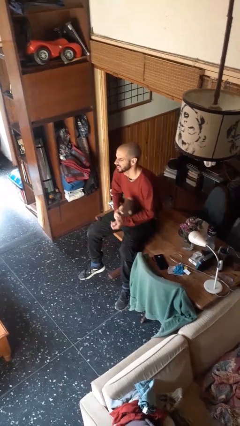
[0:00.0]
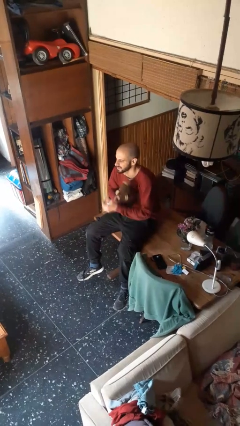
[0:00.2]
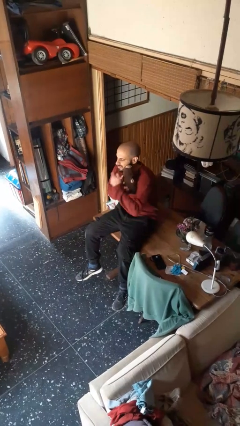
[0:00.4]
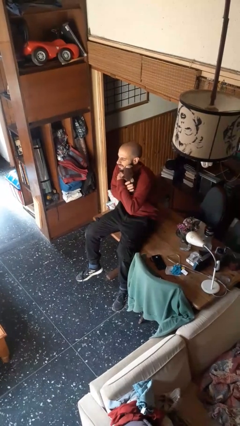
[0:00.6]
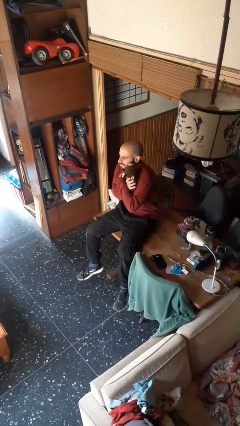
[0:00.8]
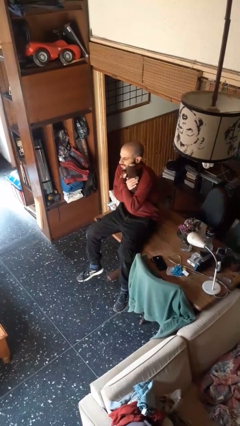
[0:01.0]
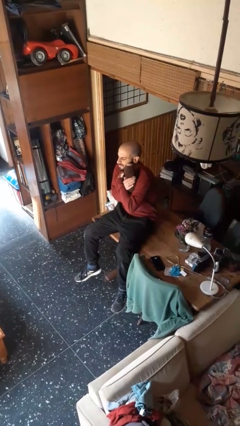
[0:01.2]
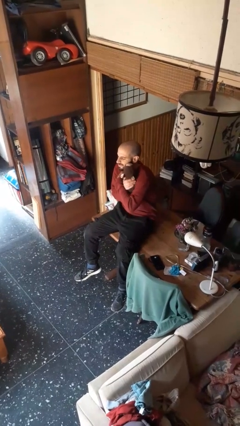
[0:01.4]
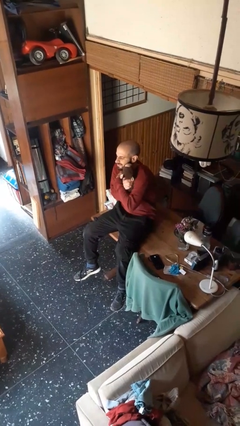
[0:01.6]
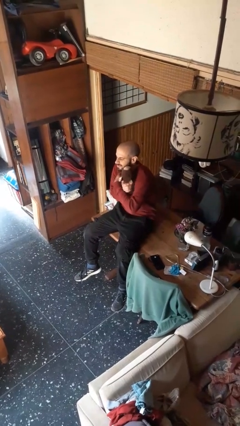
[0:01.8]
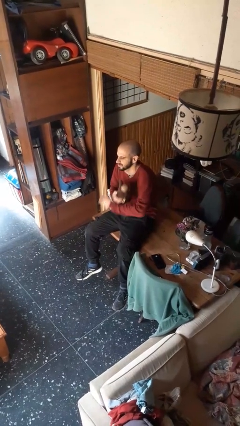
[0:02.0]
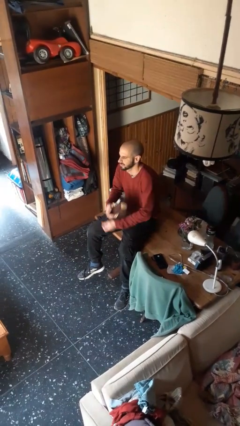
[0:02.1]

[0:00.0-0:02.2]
person hugs stuffed animal

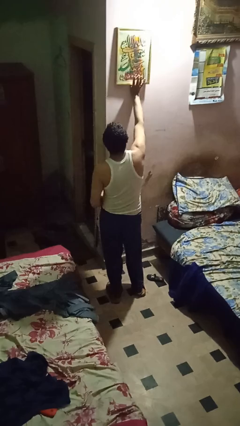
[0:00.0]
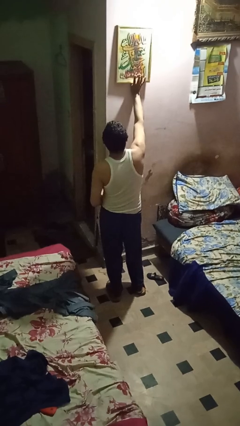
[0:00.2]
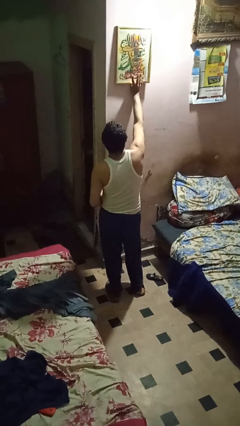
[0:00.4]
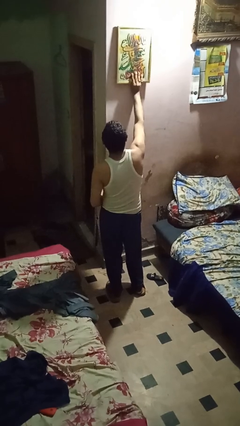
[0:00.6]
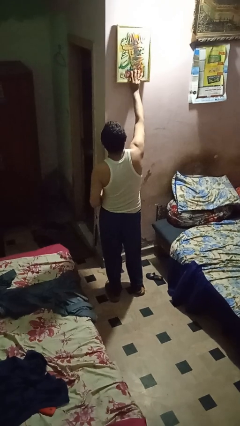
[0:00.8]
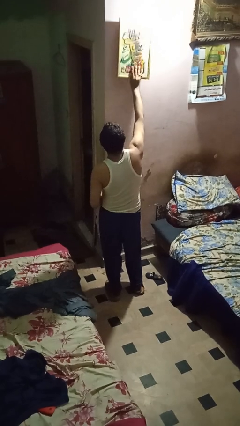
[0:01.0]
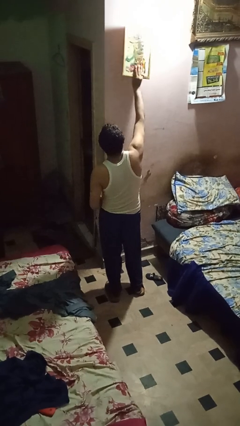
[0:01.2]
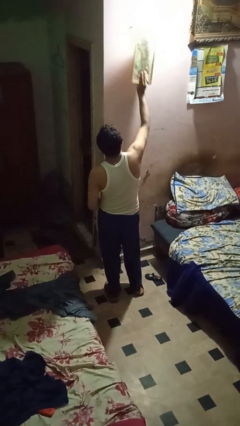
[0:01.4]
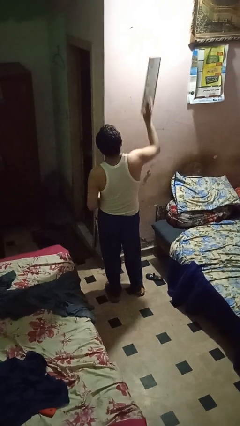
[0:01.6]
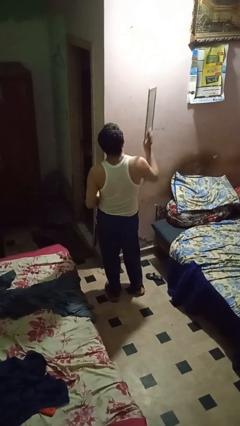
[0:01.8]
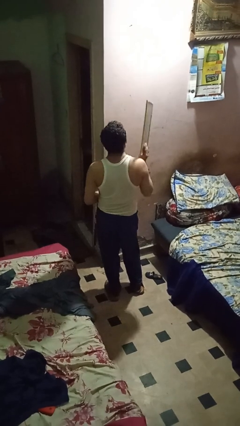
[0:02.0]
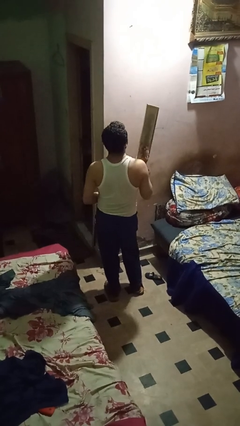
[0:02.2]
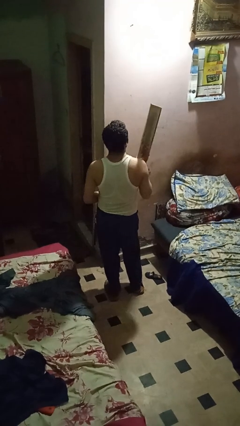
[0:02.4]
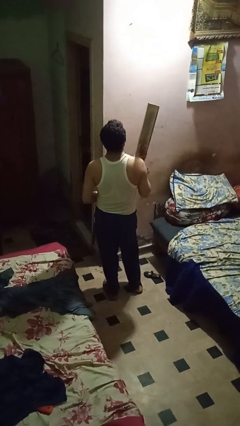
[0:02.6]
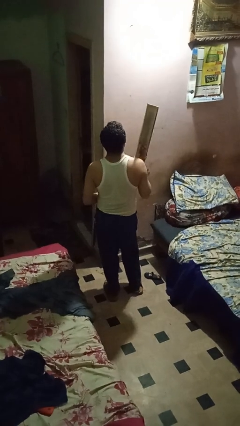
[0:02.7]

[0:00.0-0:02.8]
person takes down picture frame

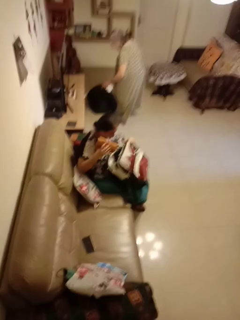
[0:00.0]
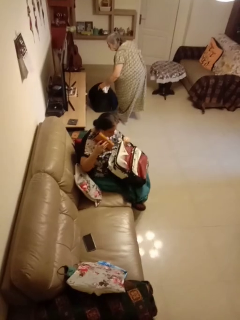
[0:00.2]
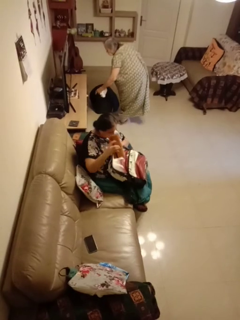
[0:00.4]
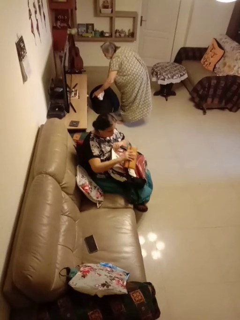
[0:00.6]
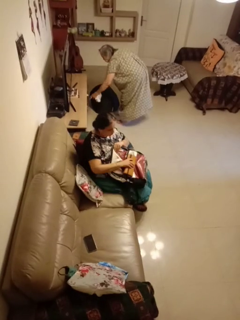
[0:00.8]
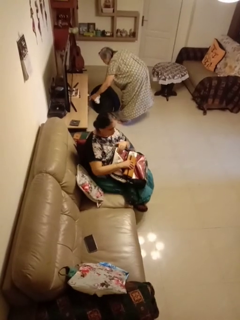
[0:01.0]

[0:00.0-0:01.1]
person takes object from backpack

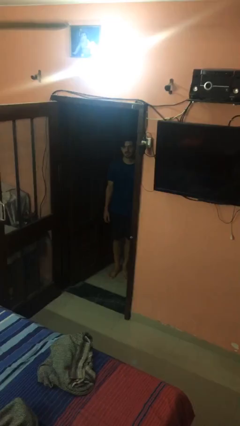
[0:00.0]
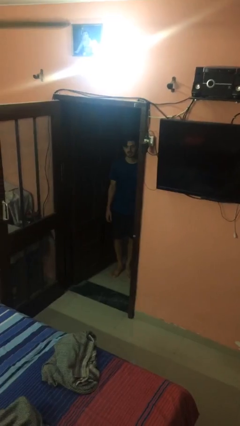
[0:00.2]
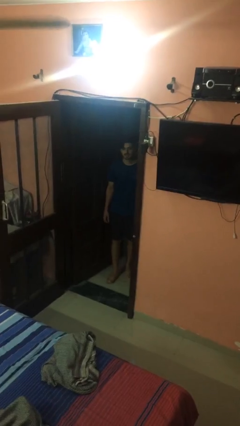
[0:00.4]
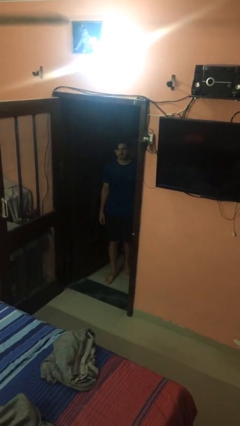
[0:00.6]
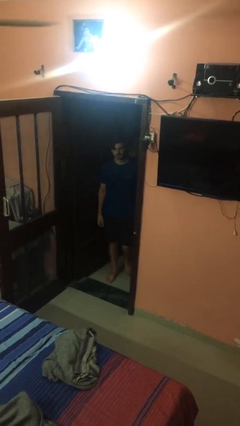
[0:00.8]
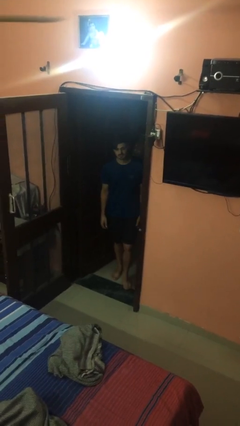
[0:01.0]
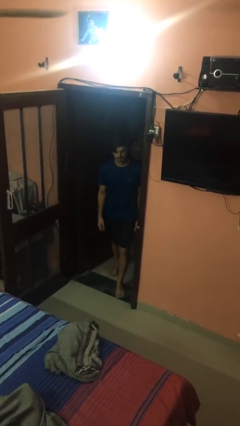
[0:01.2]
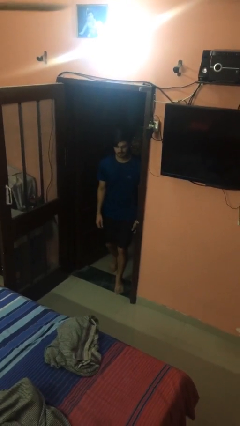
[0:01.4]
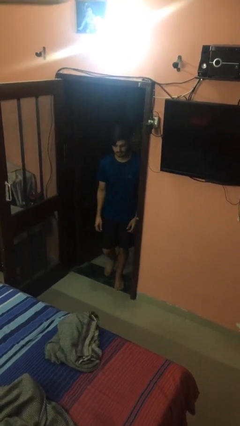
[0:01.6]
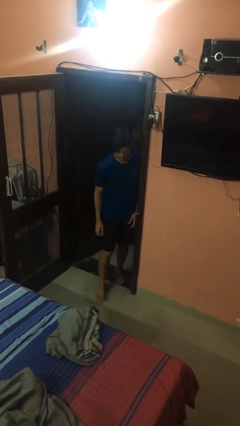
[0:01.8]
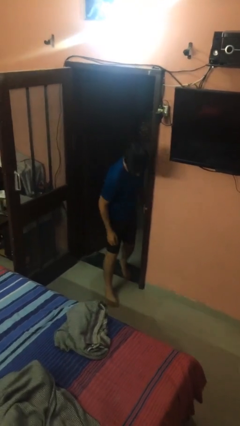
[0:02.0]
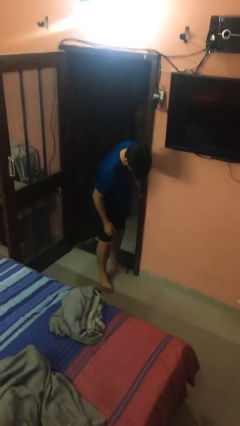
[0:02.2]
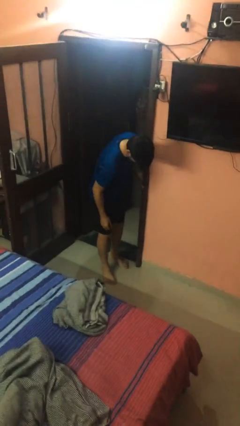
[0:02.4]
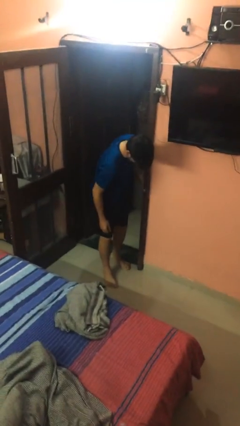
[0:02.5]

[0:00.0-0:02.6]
person bumps into wall

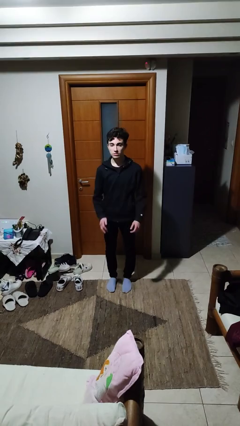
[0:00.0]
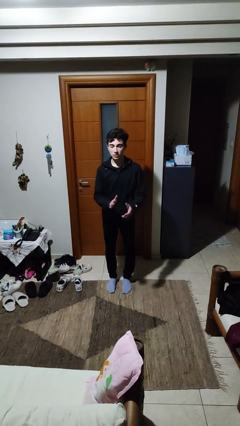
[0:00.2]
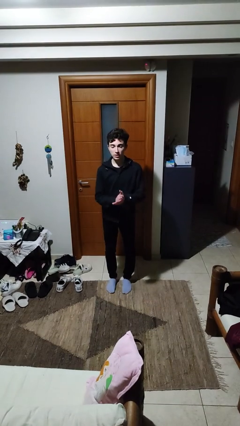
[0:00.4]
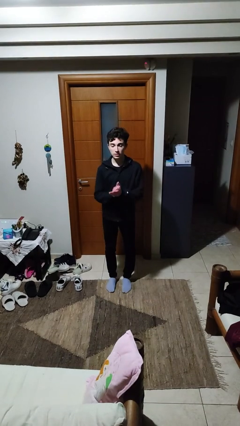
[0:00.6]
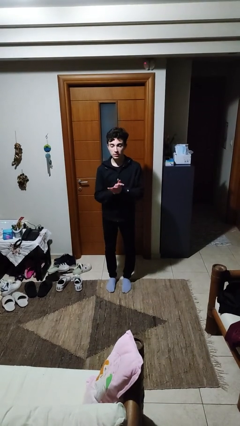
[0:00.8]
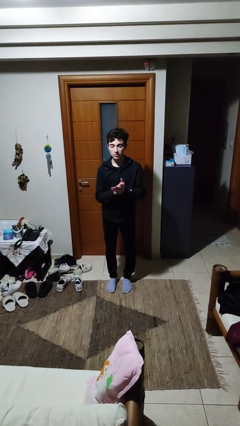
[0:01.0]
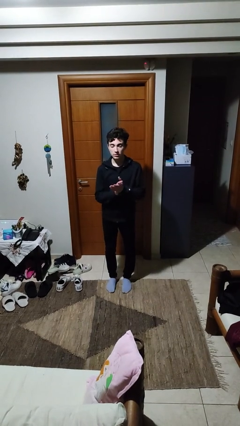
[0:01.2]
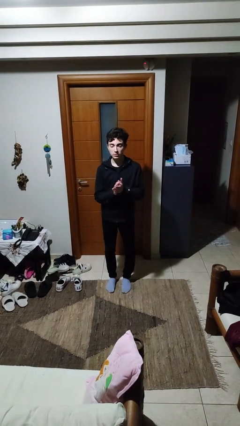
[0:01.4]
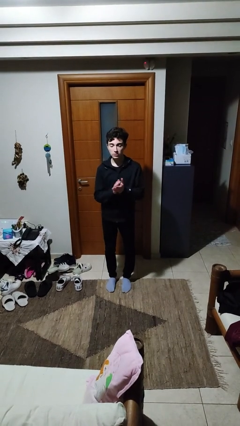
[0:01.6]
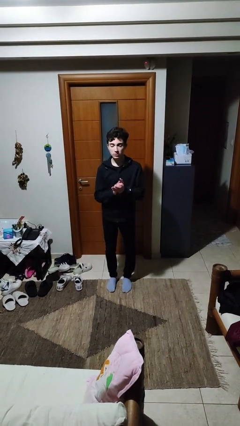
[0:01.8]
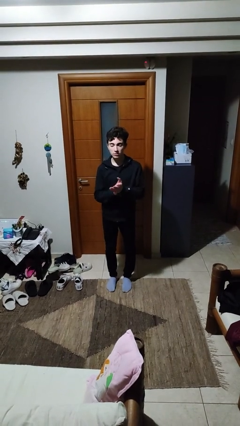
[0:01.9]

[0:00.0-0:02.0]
person claps hands

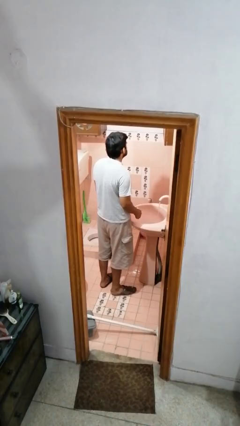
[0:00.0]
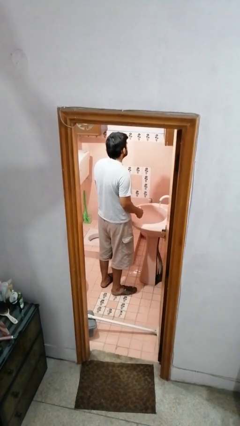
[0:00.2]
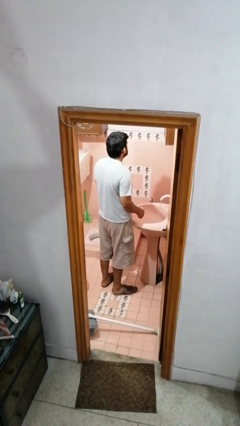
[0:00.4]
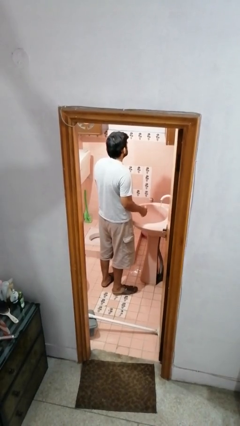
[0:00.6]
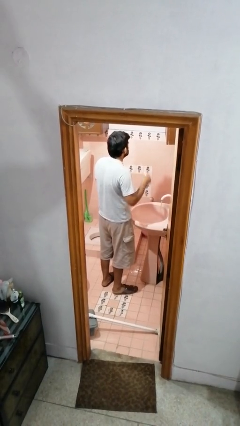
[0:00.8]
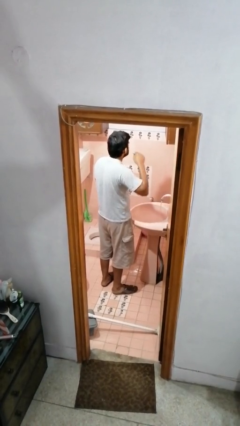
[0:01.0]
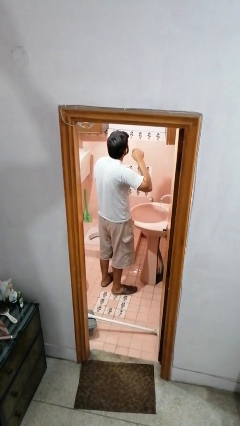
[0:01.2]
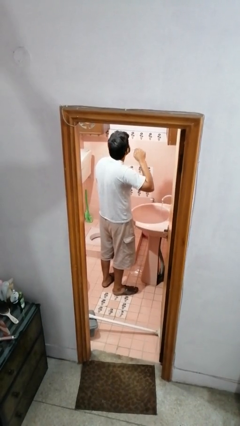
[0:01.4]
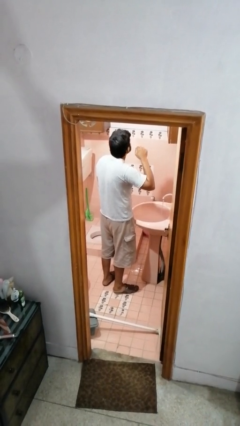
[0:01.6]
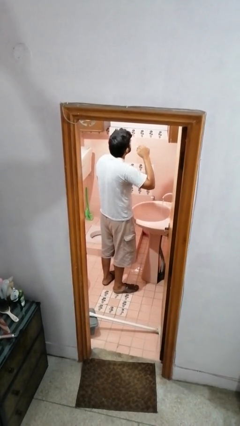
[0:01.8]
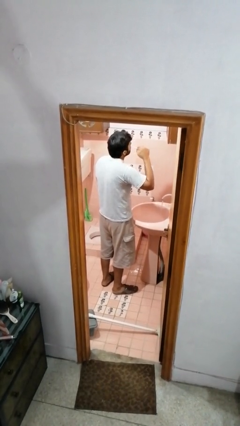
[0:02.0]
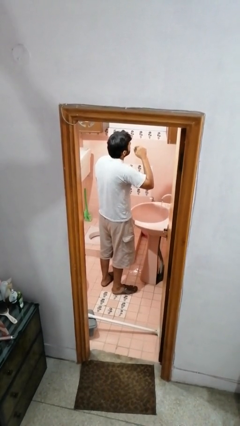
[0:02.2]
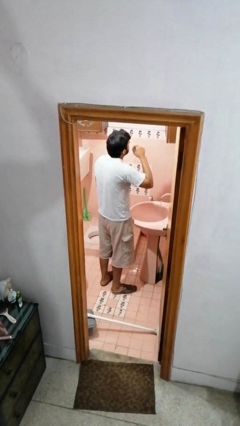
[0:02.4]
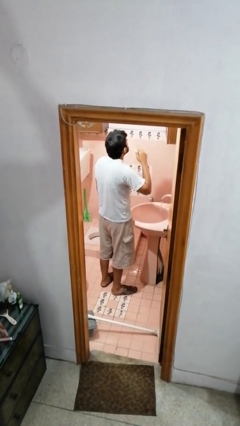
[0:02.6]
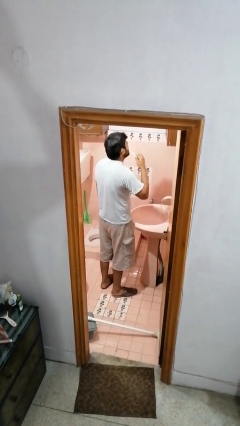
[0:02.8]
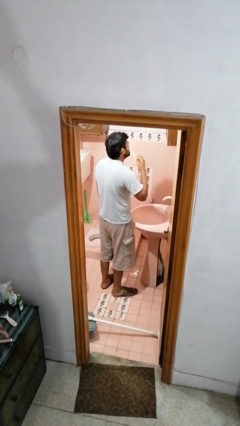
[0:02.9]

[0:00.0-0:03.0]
person brushes teeth

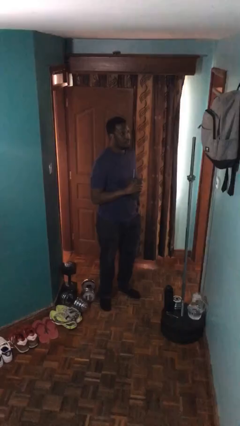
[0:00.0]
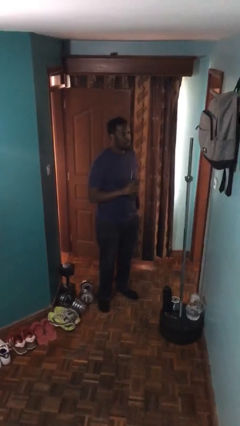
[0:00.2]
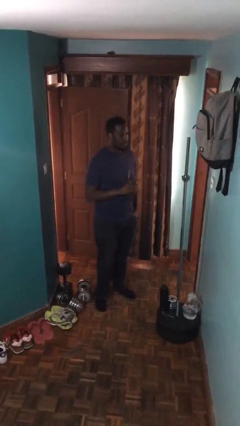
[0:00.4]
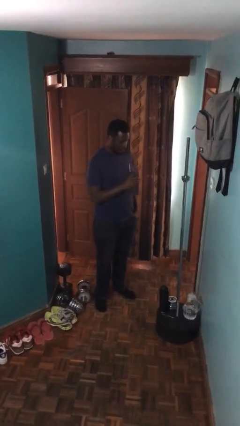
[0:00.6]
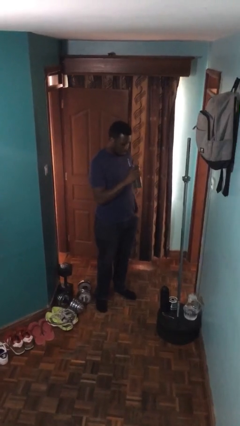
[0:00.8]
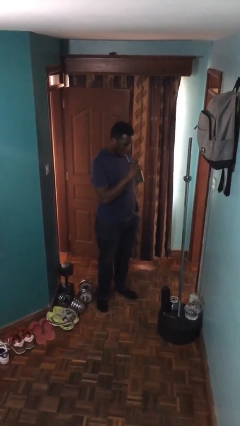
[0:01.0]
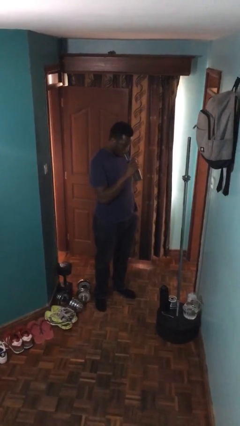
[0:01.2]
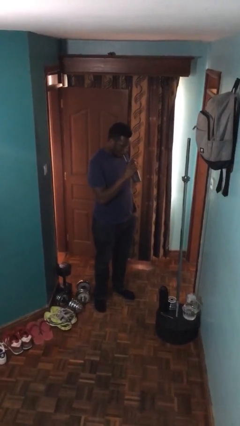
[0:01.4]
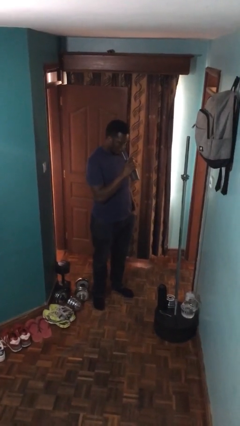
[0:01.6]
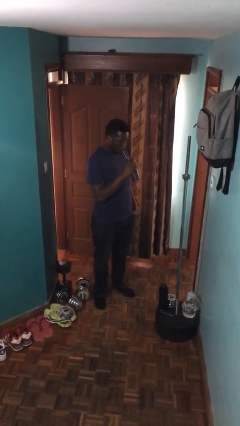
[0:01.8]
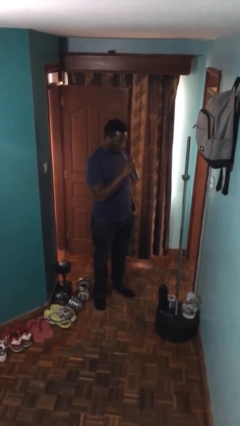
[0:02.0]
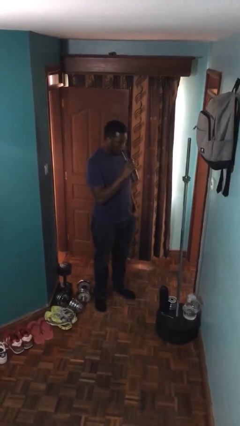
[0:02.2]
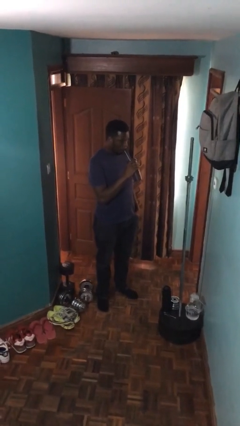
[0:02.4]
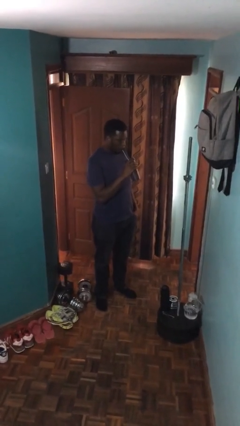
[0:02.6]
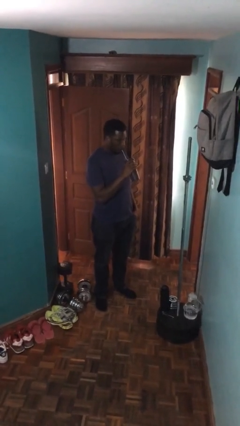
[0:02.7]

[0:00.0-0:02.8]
person drinks from straw

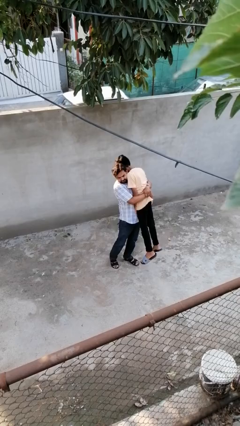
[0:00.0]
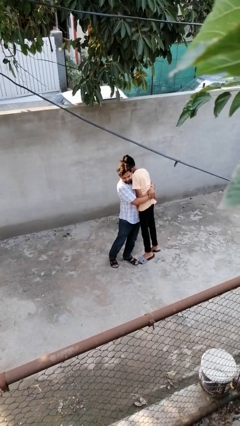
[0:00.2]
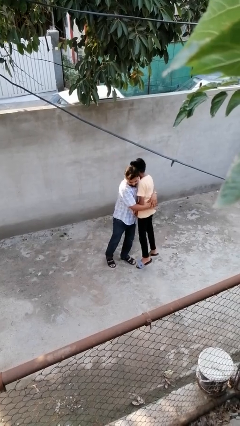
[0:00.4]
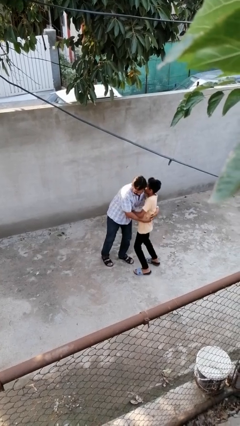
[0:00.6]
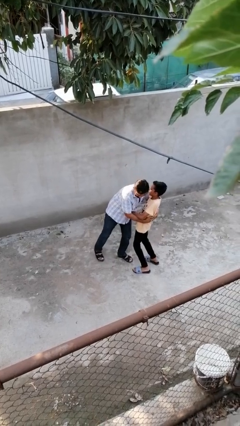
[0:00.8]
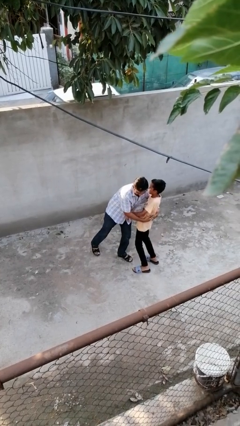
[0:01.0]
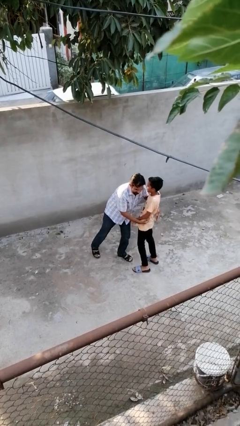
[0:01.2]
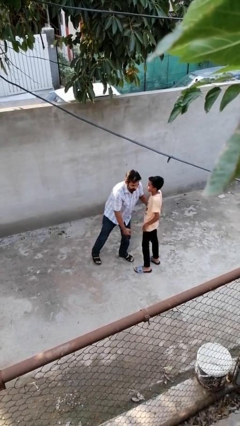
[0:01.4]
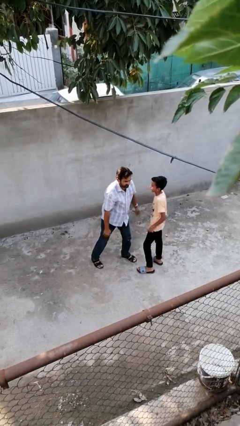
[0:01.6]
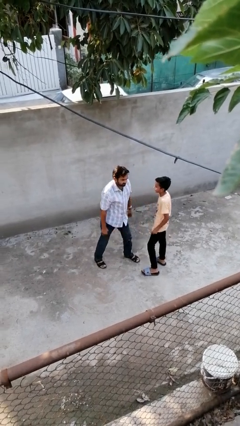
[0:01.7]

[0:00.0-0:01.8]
person puts down person
